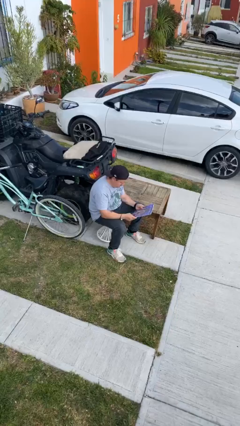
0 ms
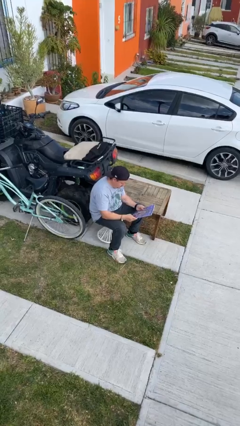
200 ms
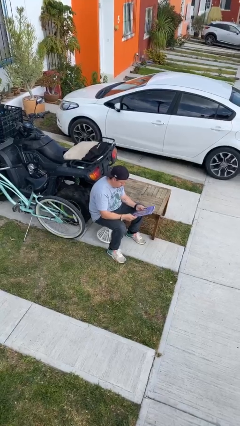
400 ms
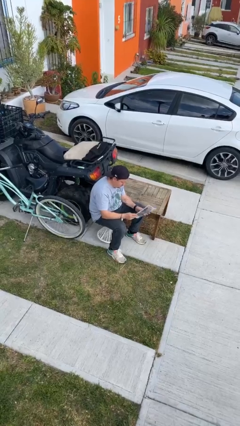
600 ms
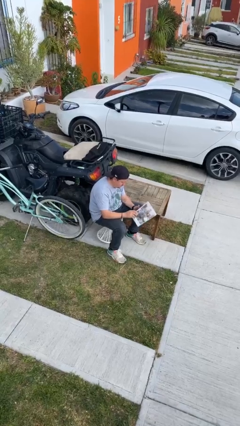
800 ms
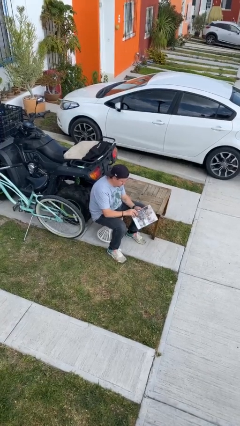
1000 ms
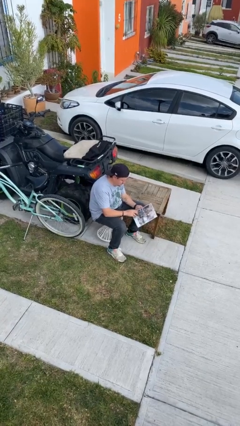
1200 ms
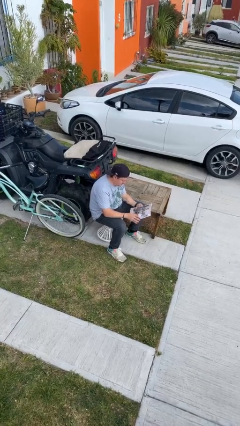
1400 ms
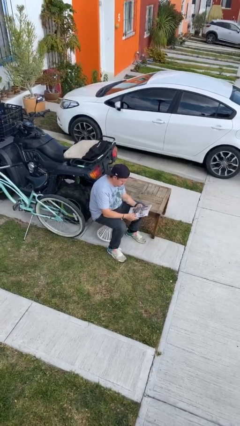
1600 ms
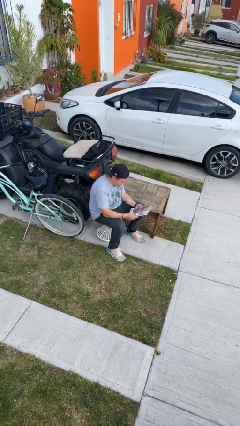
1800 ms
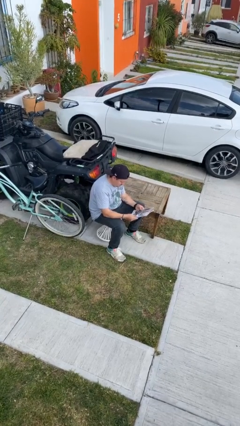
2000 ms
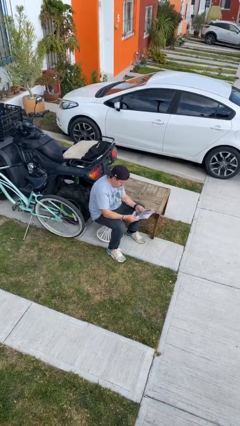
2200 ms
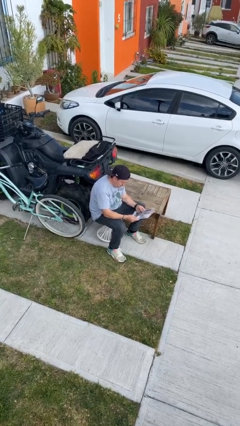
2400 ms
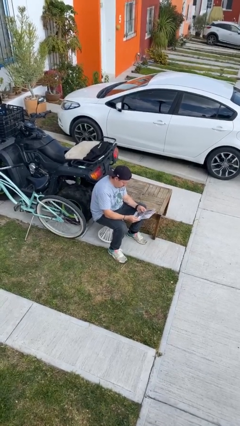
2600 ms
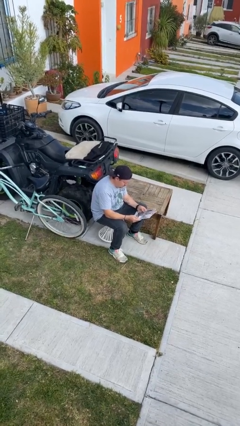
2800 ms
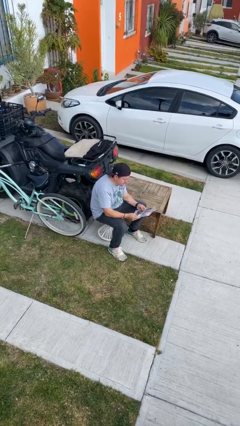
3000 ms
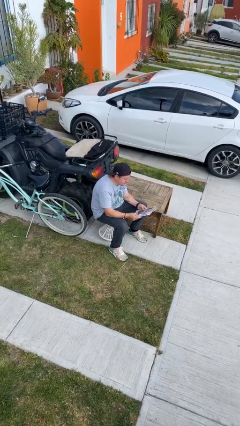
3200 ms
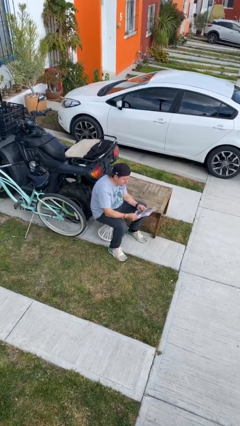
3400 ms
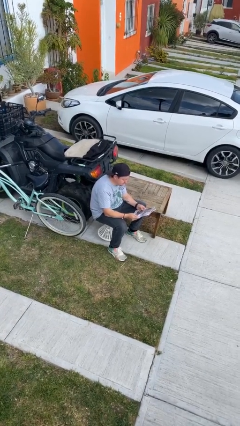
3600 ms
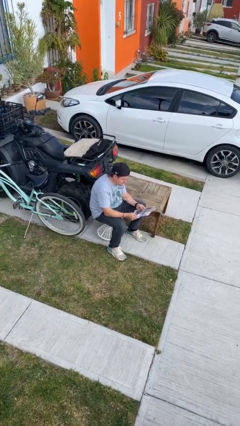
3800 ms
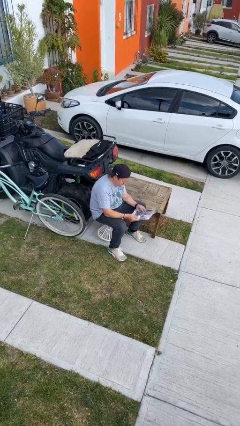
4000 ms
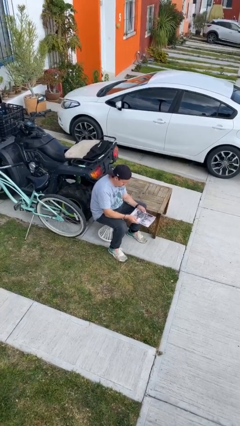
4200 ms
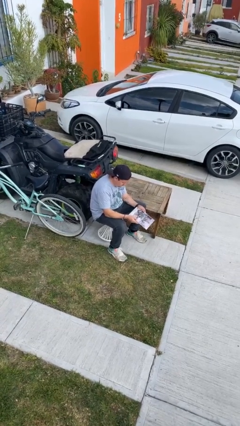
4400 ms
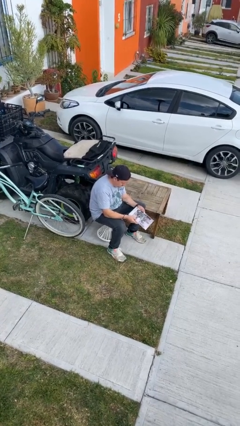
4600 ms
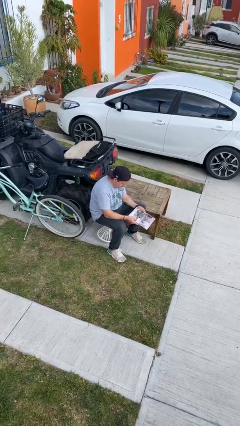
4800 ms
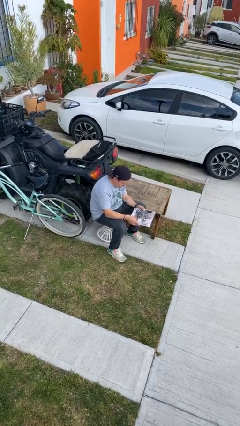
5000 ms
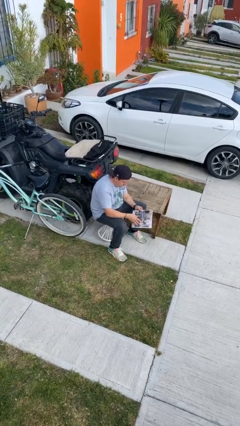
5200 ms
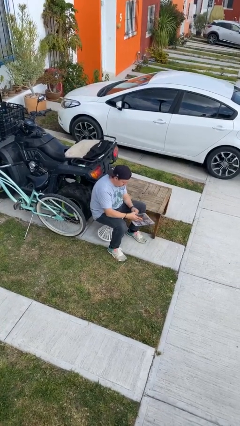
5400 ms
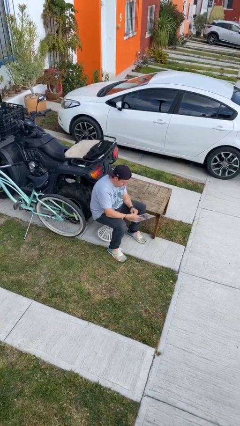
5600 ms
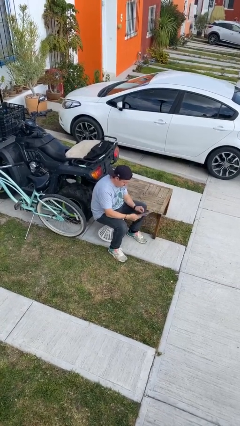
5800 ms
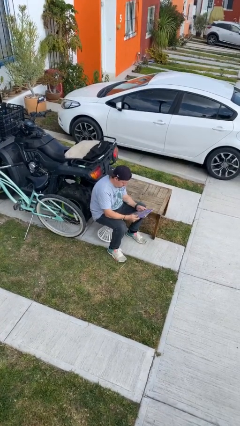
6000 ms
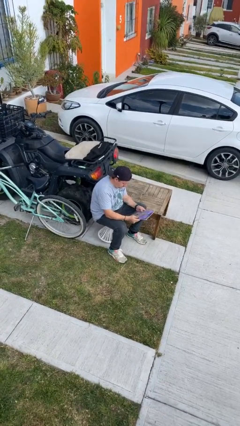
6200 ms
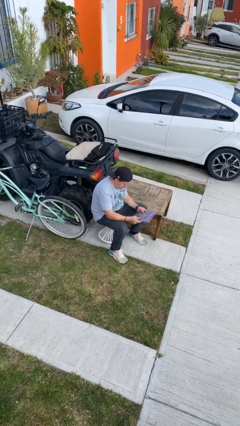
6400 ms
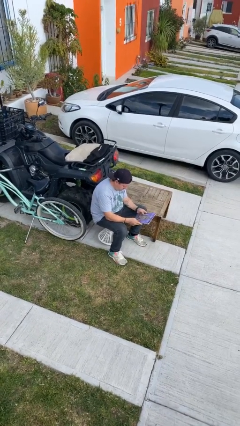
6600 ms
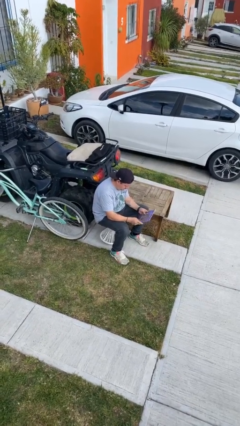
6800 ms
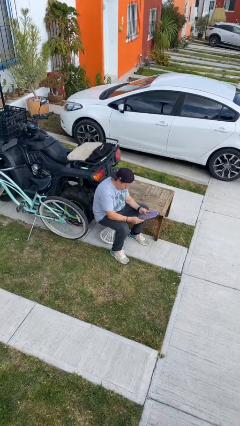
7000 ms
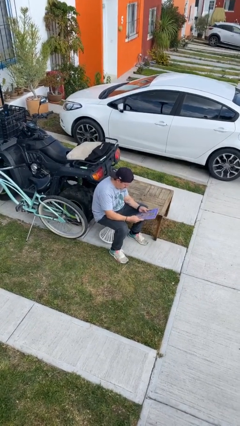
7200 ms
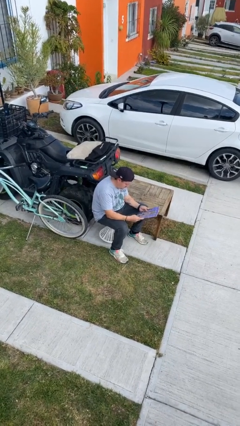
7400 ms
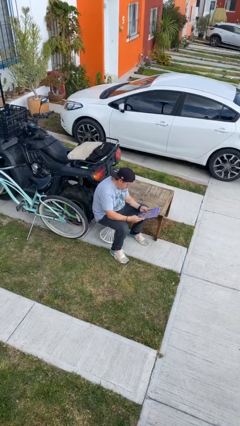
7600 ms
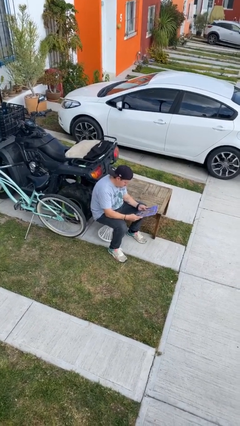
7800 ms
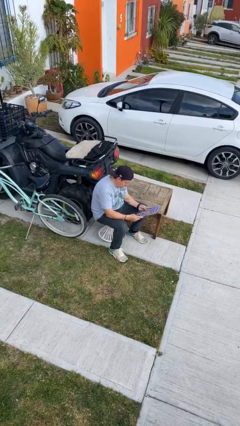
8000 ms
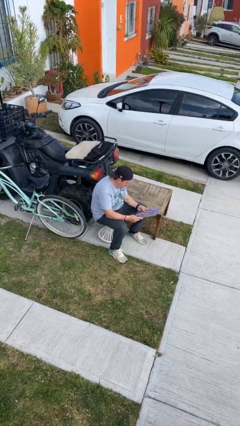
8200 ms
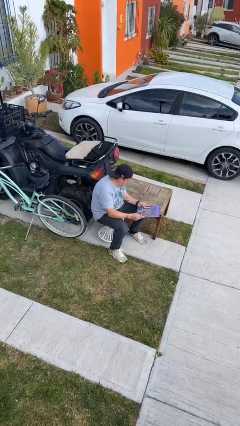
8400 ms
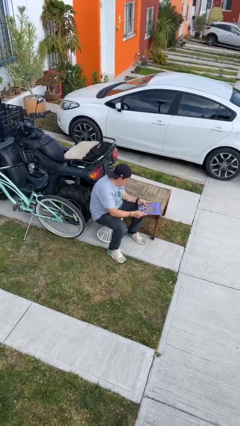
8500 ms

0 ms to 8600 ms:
person reads document

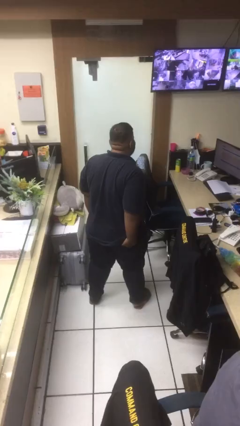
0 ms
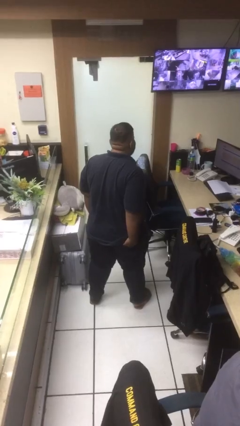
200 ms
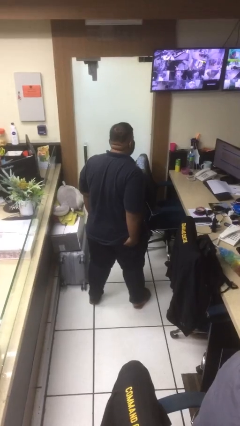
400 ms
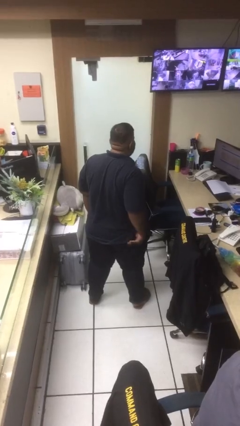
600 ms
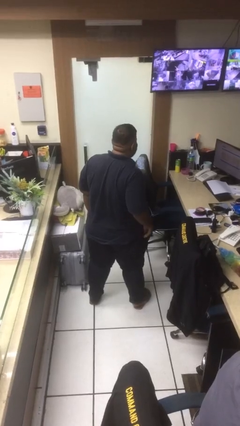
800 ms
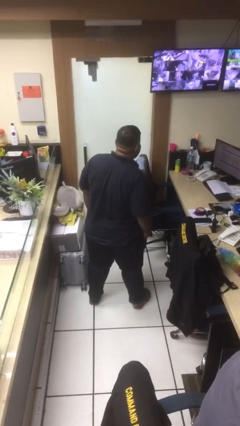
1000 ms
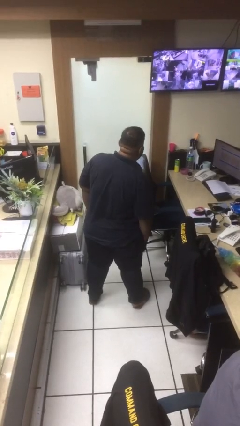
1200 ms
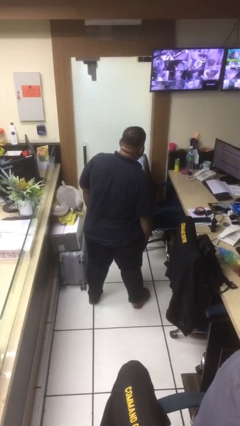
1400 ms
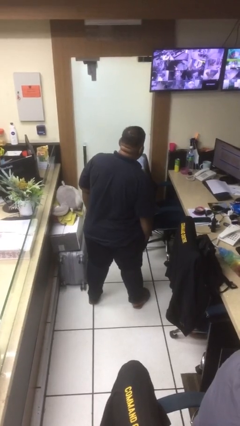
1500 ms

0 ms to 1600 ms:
person puts hands in back pockets

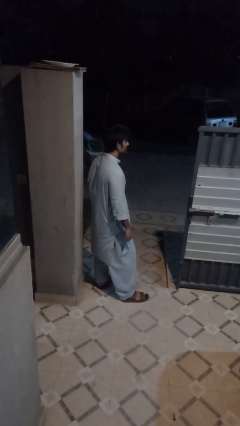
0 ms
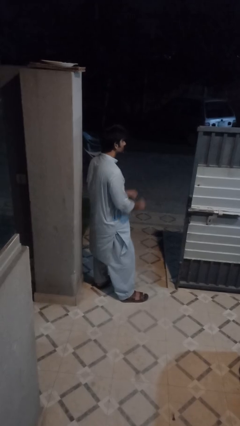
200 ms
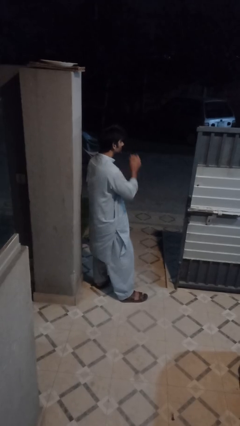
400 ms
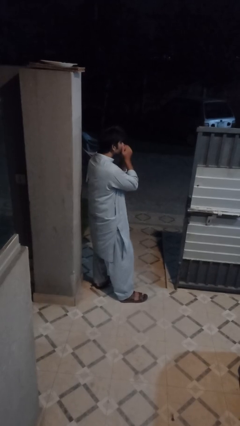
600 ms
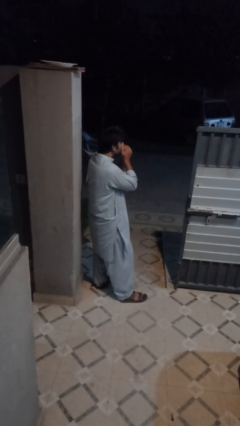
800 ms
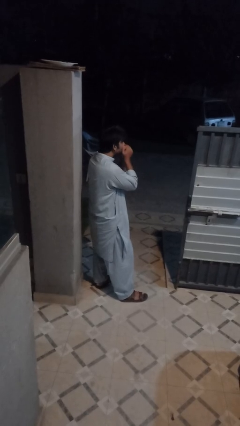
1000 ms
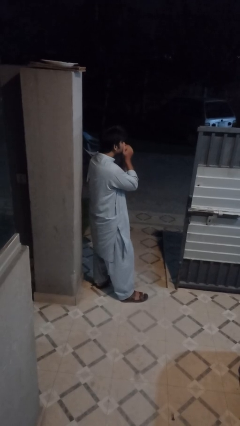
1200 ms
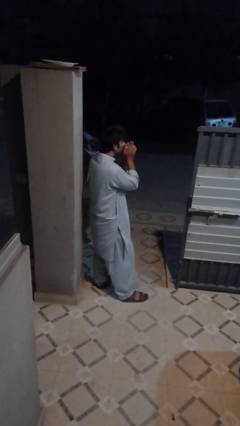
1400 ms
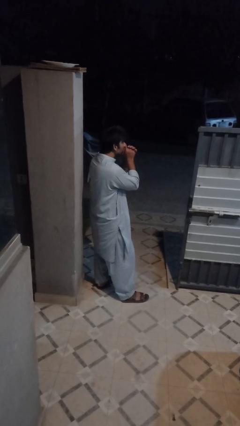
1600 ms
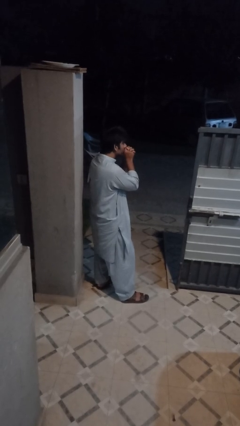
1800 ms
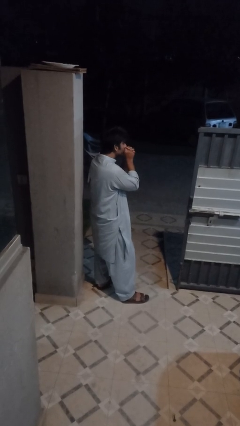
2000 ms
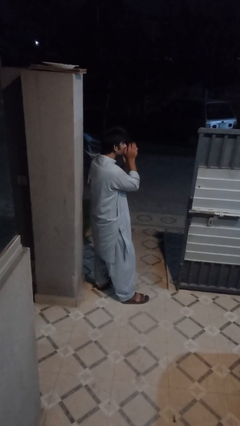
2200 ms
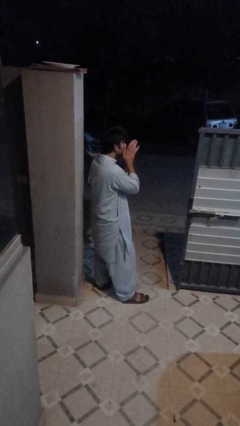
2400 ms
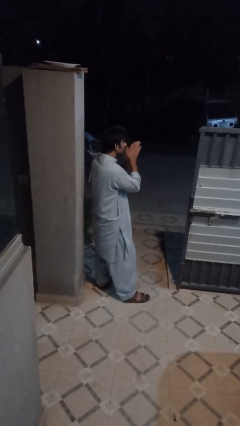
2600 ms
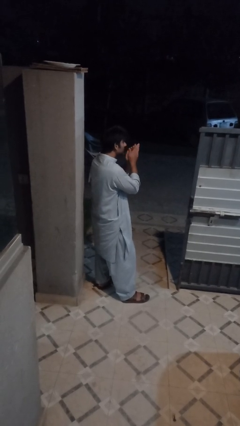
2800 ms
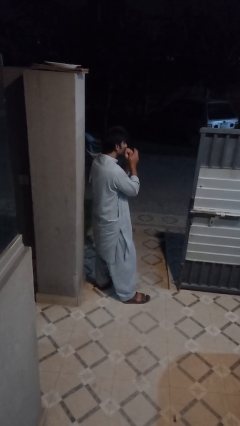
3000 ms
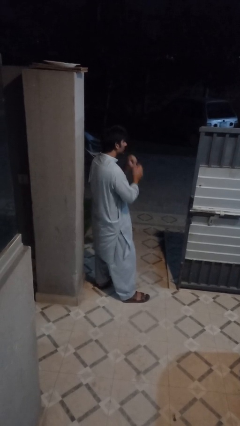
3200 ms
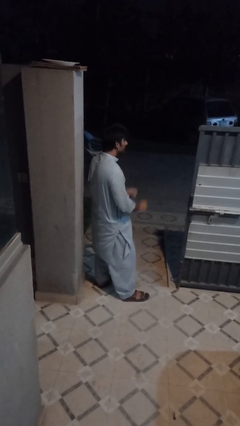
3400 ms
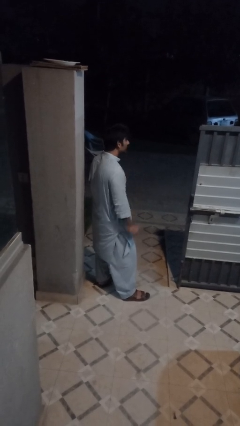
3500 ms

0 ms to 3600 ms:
person blows into hands

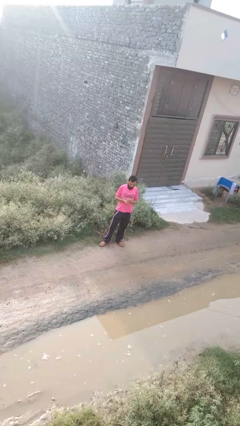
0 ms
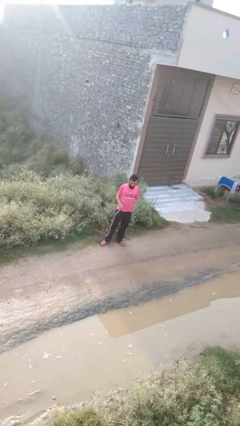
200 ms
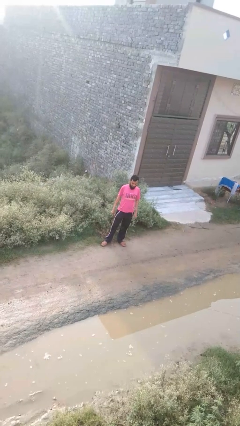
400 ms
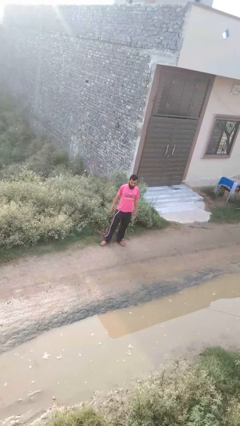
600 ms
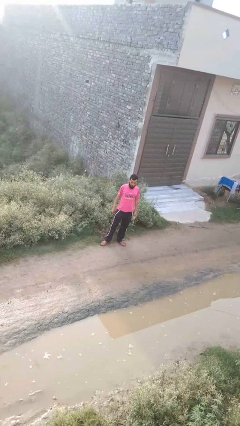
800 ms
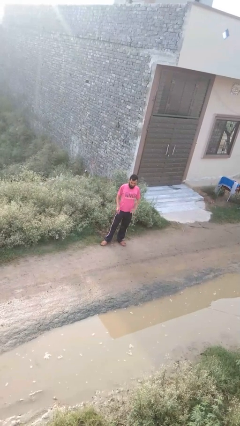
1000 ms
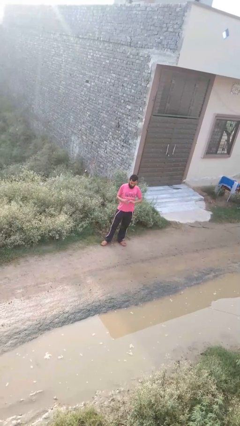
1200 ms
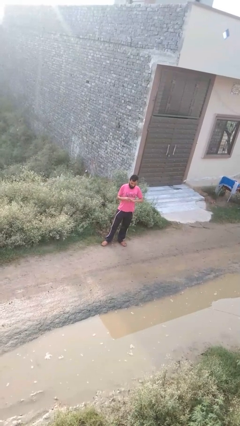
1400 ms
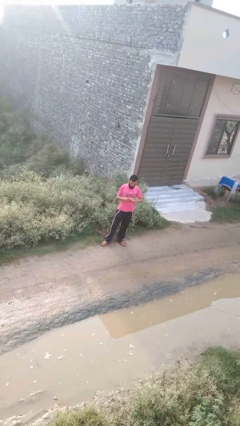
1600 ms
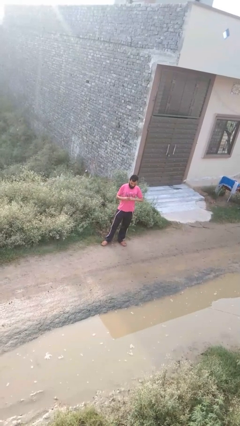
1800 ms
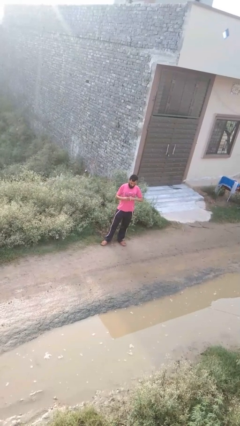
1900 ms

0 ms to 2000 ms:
person takes off ring

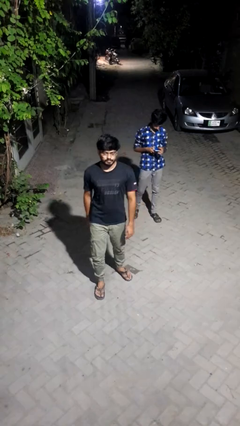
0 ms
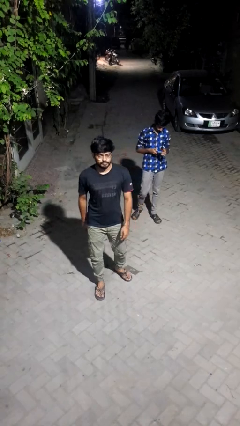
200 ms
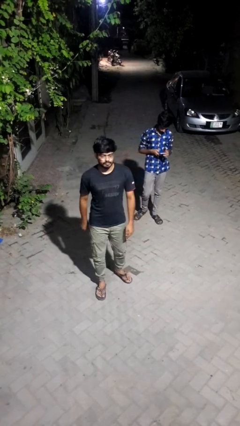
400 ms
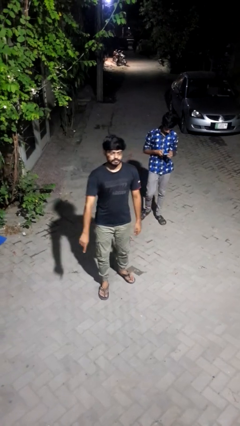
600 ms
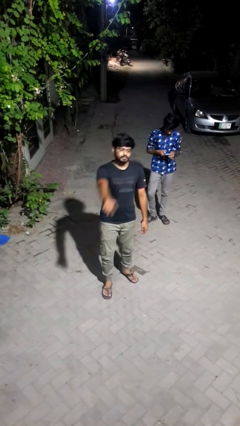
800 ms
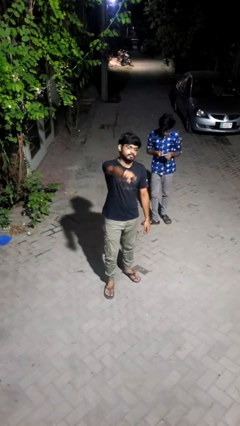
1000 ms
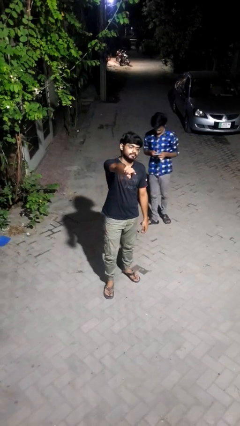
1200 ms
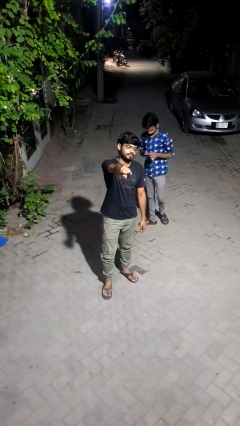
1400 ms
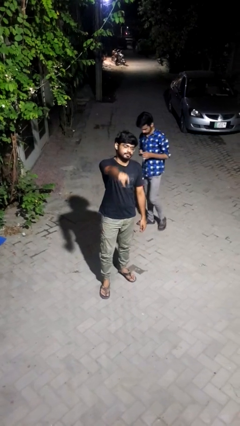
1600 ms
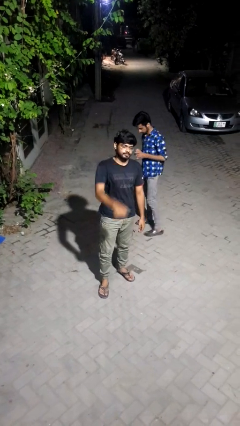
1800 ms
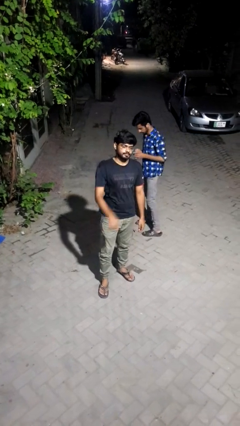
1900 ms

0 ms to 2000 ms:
person points at person

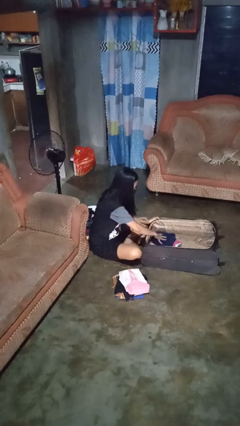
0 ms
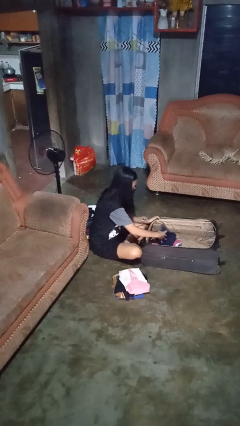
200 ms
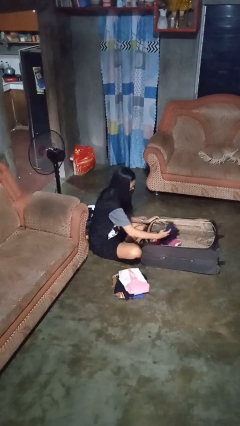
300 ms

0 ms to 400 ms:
person unloads clothes from suitcase
